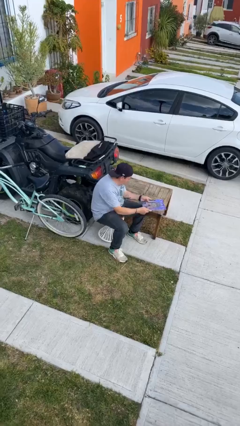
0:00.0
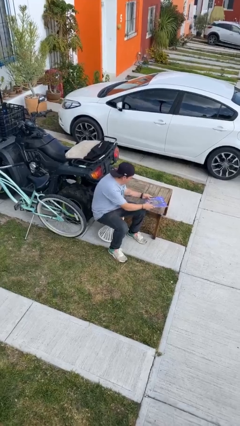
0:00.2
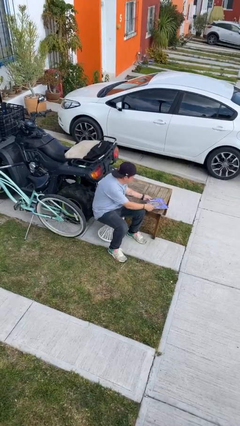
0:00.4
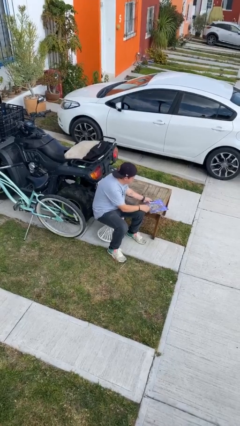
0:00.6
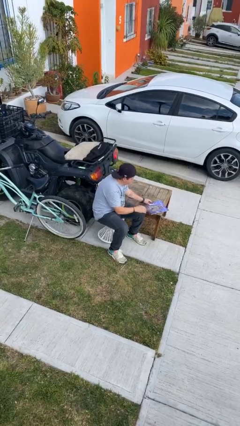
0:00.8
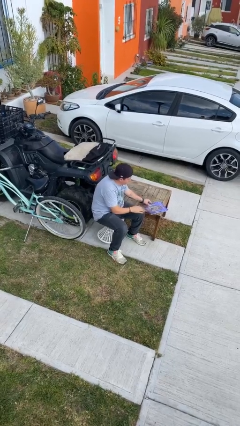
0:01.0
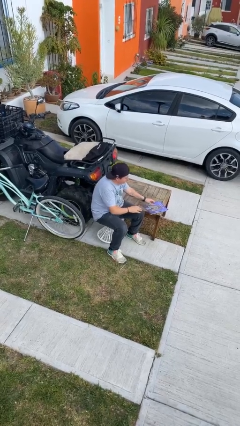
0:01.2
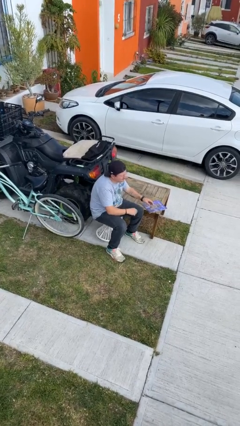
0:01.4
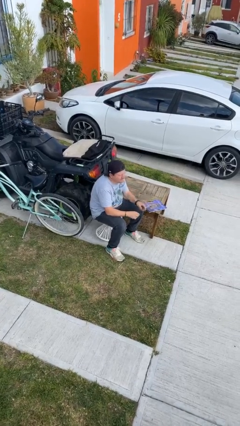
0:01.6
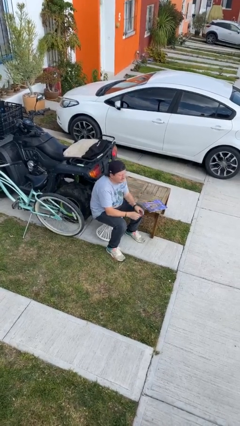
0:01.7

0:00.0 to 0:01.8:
person puts down object on table

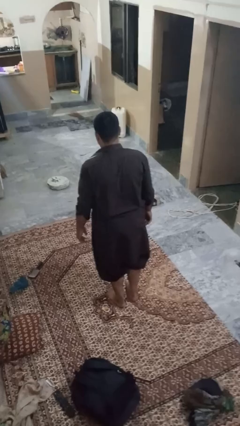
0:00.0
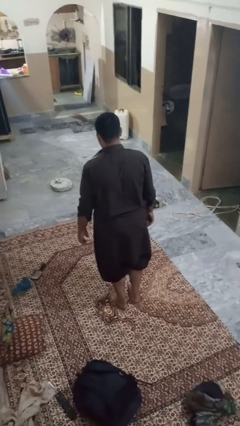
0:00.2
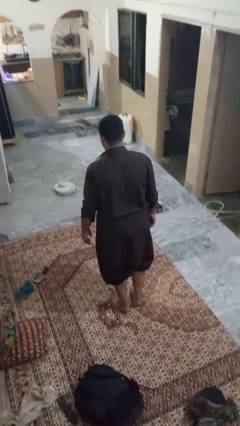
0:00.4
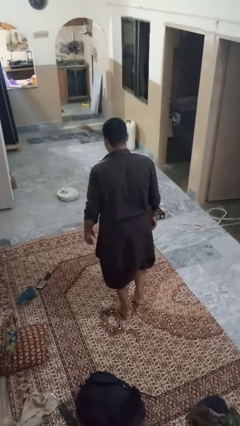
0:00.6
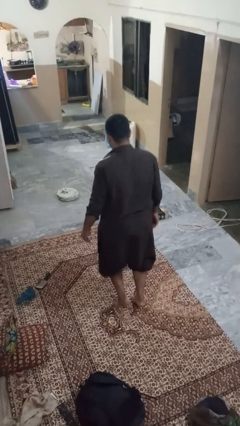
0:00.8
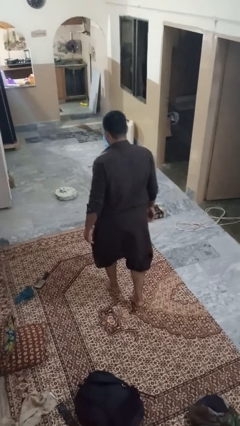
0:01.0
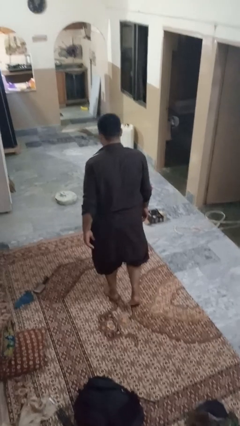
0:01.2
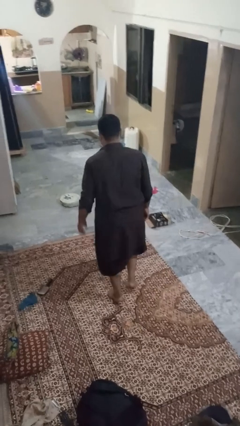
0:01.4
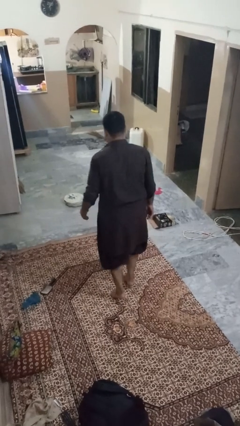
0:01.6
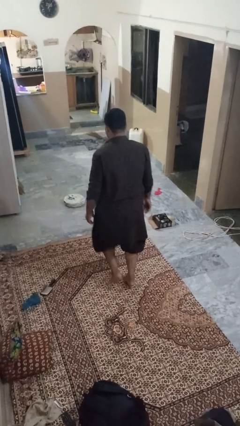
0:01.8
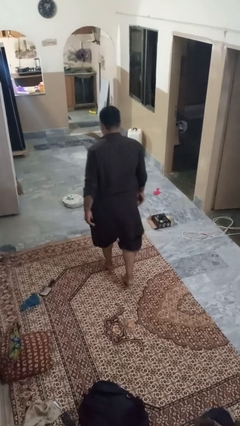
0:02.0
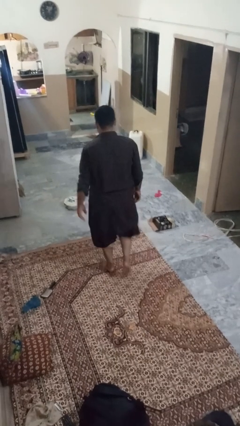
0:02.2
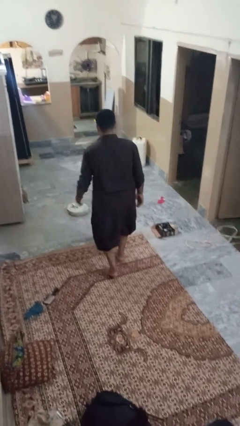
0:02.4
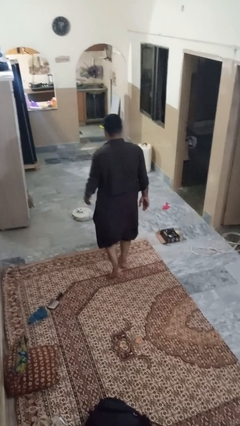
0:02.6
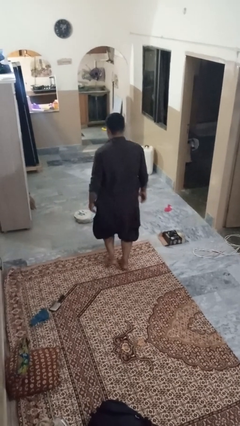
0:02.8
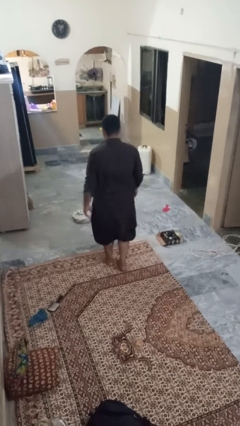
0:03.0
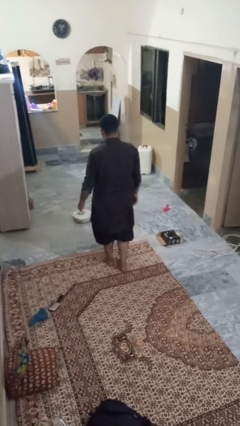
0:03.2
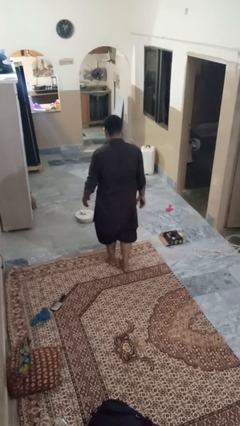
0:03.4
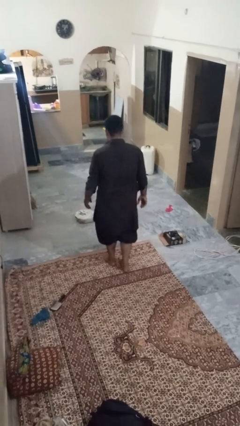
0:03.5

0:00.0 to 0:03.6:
person walks tiptoe

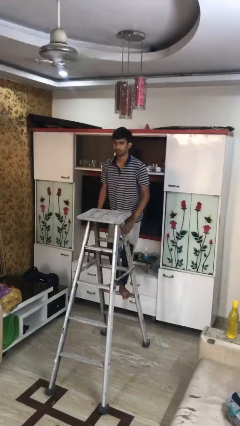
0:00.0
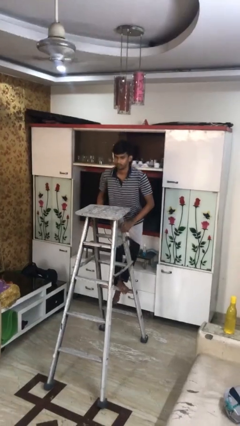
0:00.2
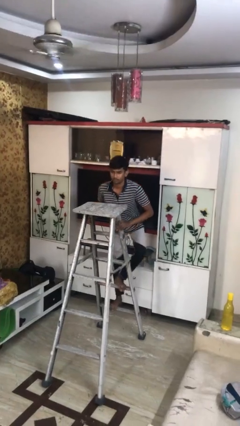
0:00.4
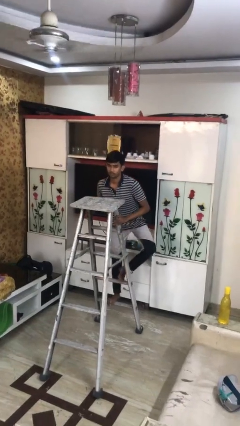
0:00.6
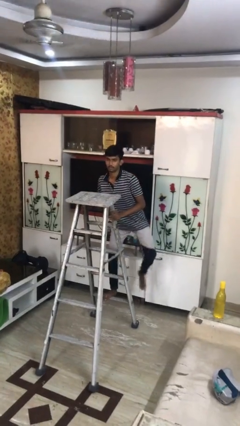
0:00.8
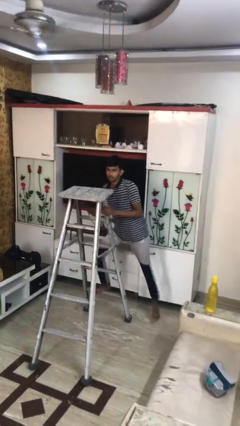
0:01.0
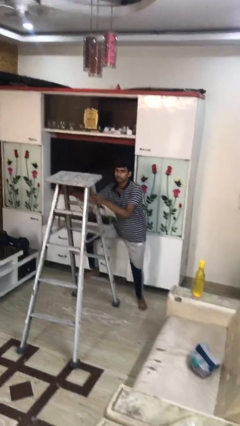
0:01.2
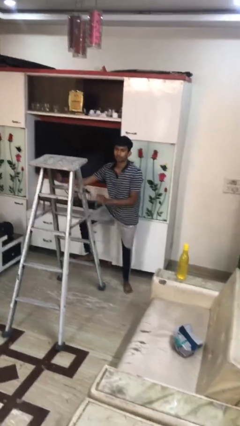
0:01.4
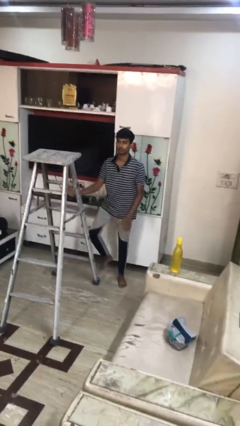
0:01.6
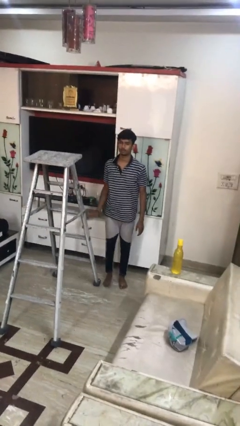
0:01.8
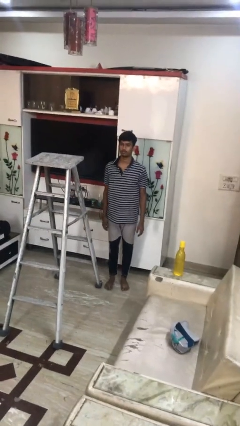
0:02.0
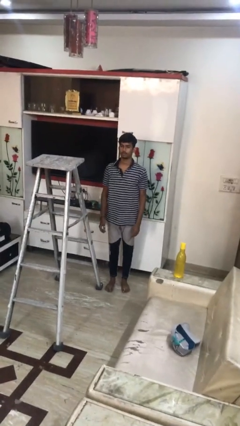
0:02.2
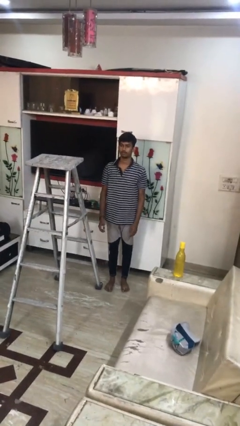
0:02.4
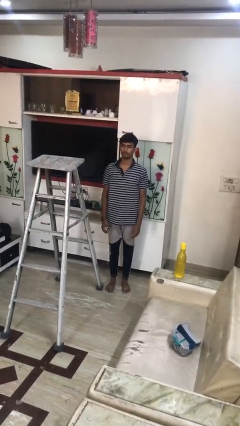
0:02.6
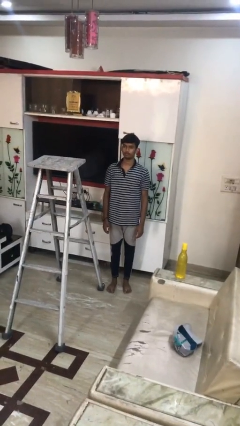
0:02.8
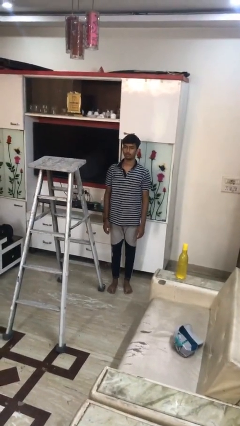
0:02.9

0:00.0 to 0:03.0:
person climbs down ladder

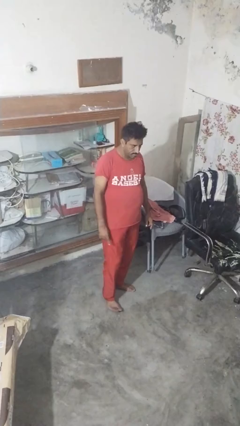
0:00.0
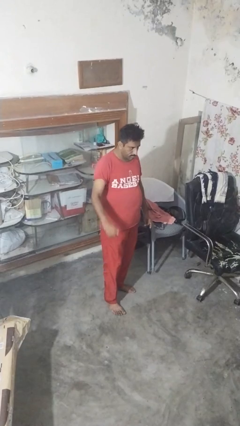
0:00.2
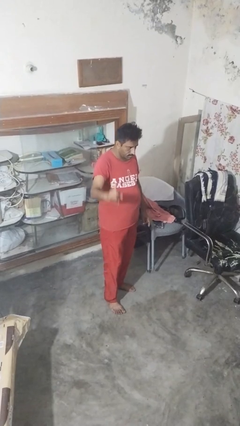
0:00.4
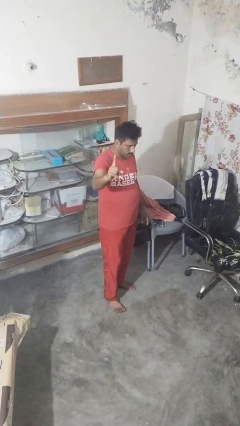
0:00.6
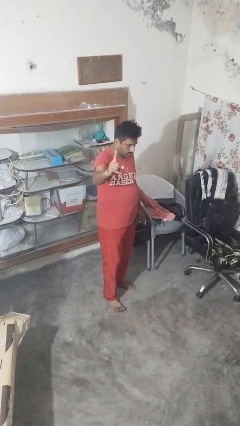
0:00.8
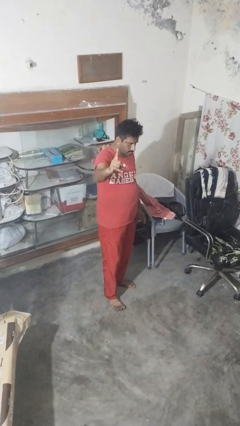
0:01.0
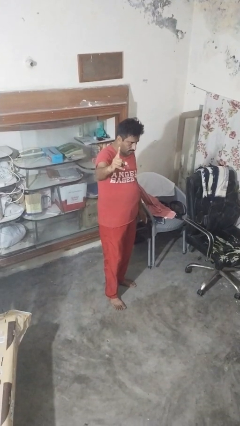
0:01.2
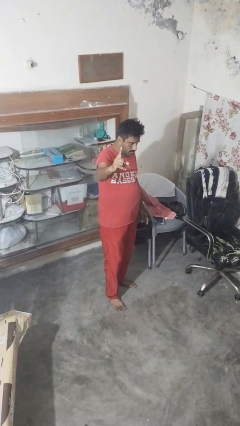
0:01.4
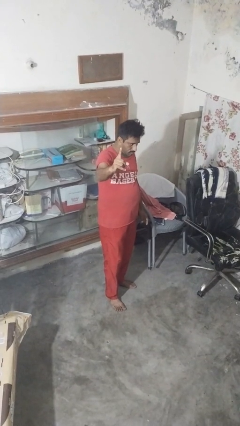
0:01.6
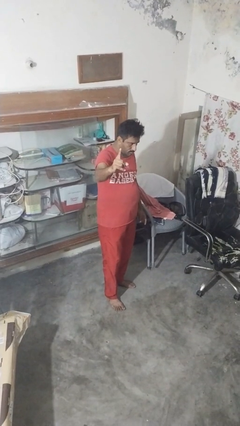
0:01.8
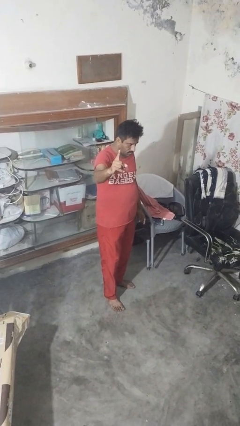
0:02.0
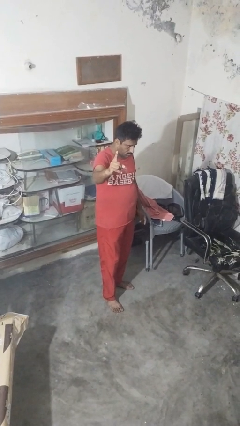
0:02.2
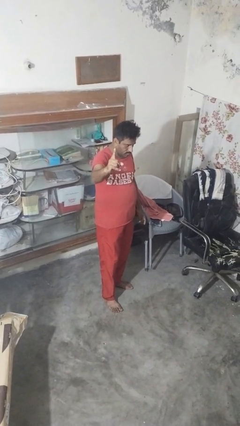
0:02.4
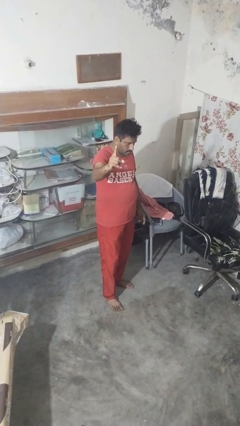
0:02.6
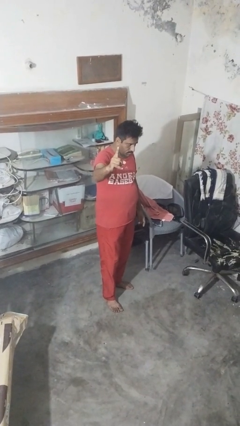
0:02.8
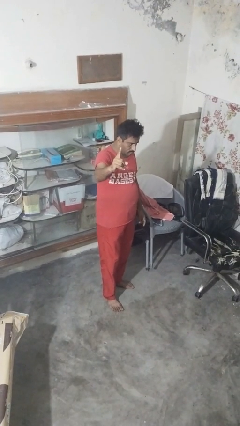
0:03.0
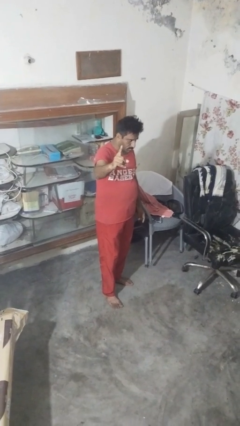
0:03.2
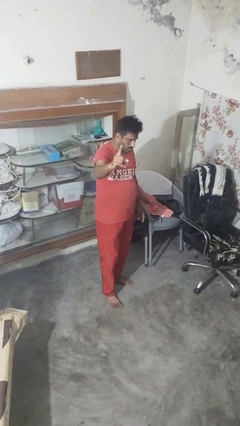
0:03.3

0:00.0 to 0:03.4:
person gestures number one

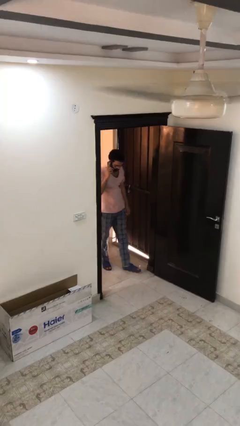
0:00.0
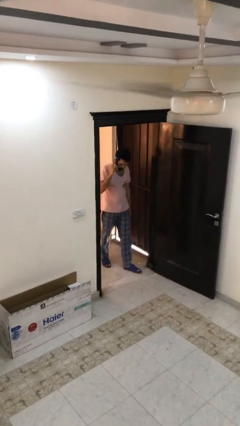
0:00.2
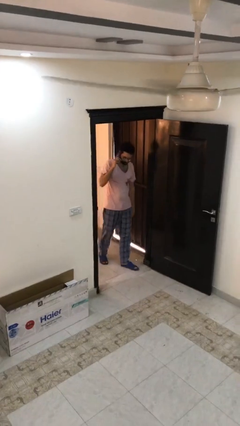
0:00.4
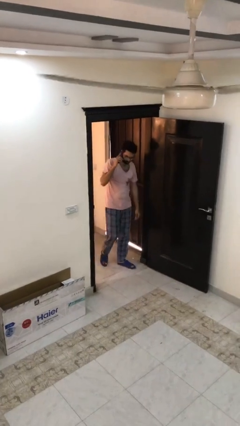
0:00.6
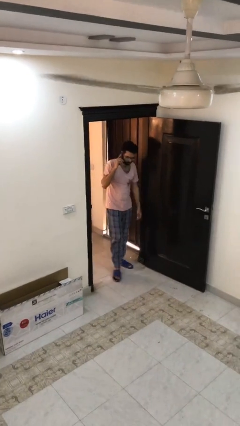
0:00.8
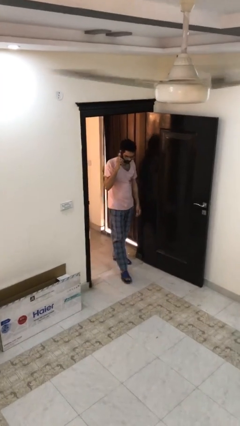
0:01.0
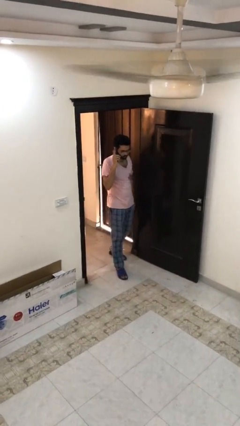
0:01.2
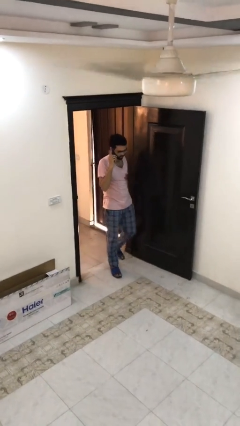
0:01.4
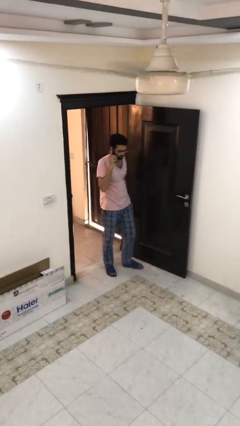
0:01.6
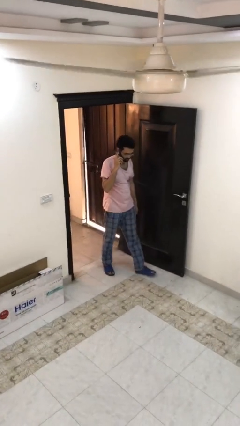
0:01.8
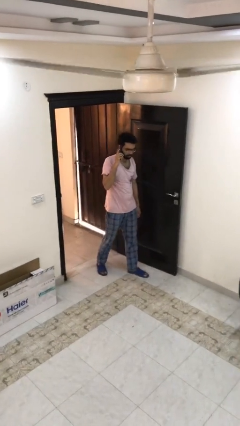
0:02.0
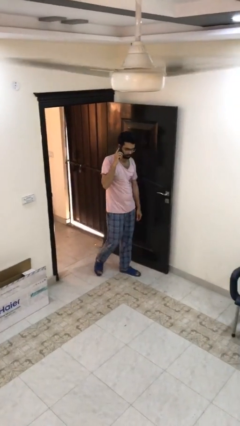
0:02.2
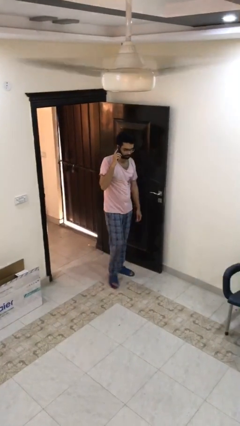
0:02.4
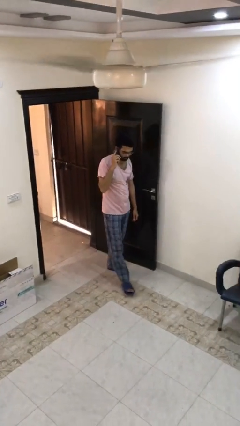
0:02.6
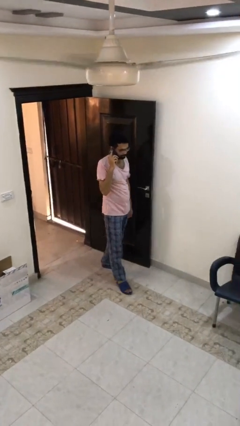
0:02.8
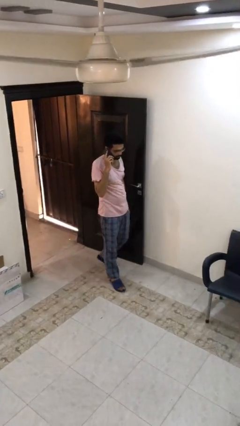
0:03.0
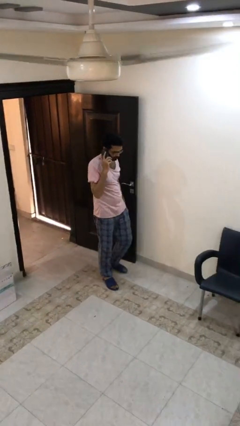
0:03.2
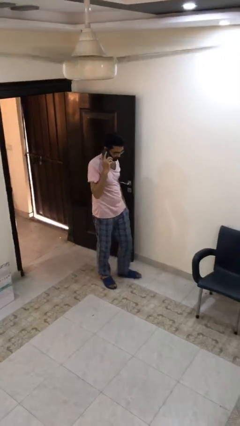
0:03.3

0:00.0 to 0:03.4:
person enters scene through structure

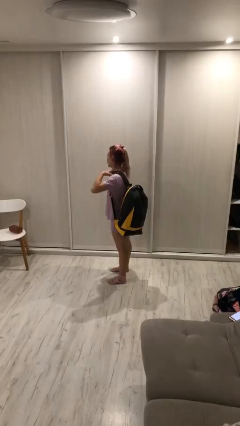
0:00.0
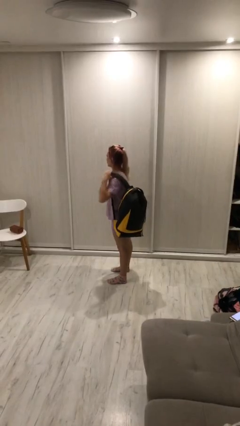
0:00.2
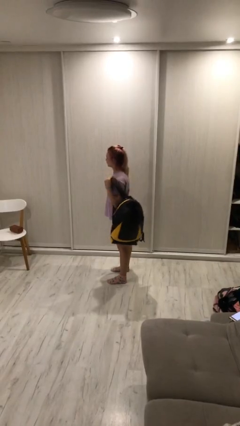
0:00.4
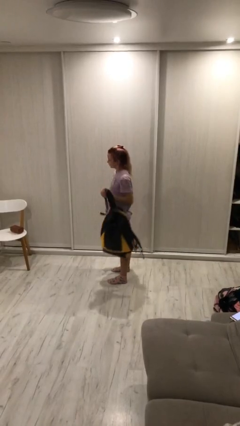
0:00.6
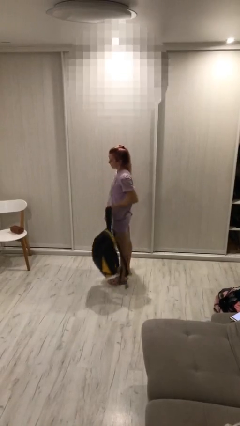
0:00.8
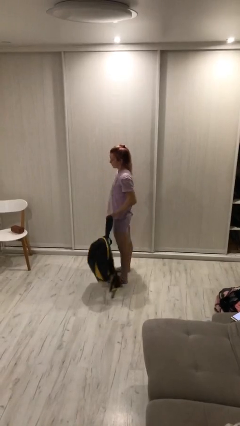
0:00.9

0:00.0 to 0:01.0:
person takes off backpack

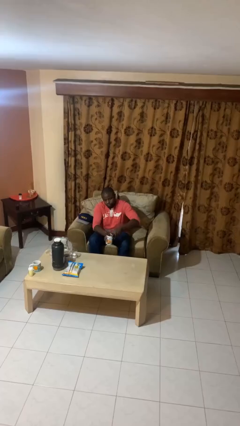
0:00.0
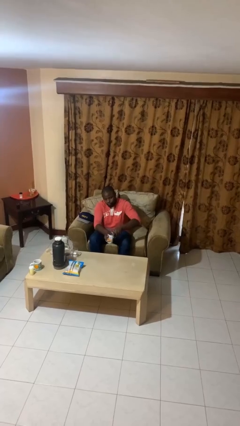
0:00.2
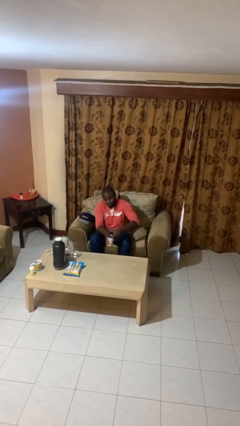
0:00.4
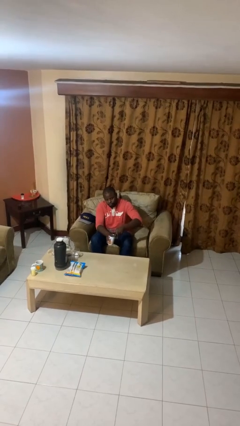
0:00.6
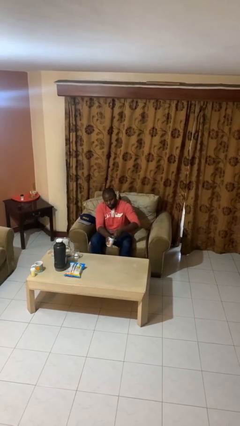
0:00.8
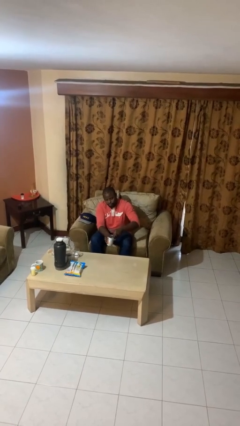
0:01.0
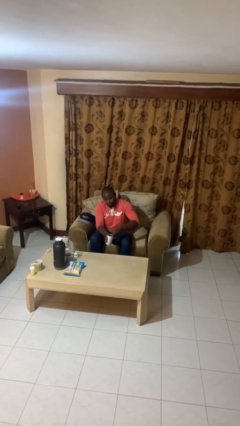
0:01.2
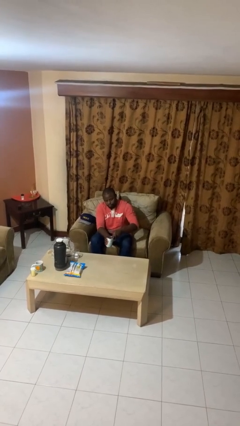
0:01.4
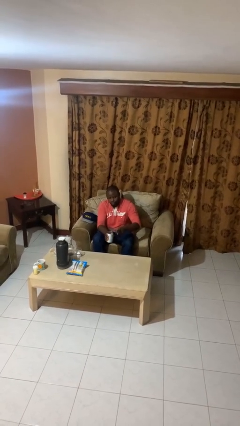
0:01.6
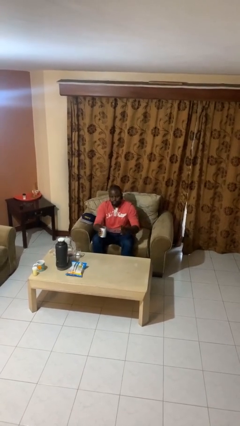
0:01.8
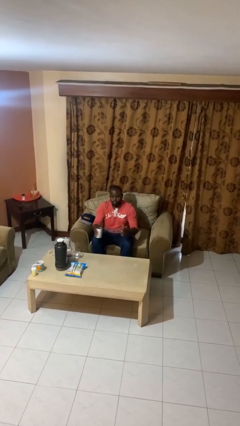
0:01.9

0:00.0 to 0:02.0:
person opens can with can opener
